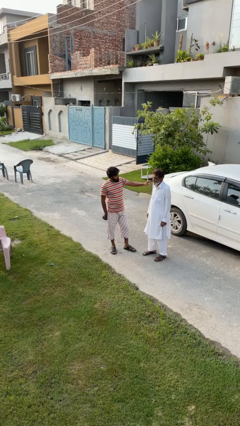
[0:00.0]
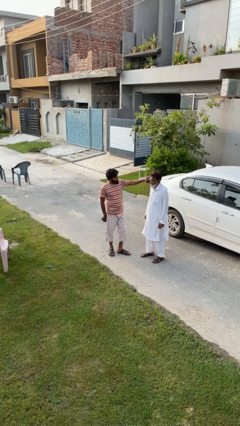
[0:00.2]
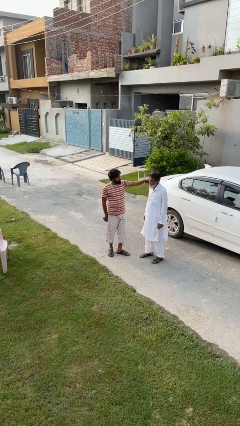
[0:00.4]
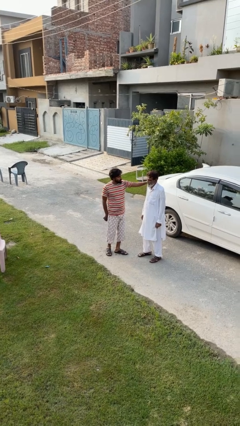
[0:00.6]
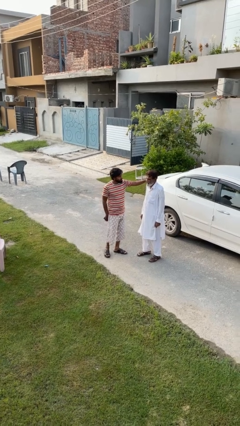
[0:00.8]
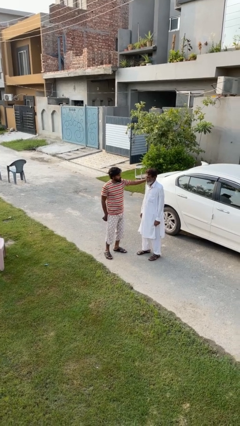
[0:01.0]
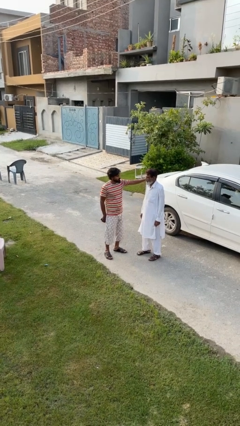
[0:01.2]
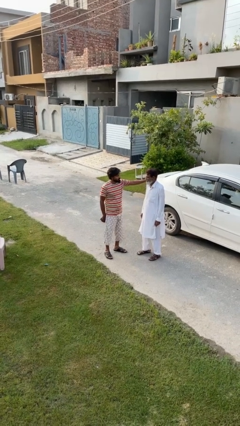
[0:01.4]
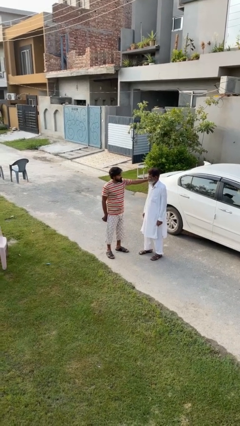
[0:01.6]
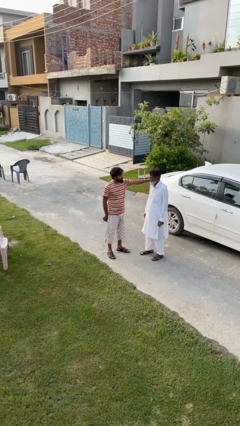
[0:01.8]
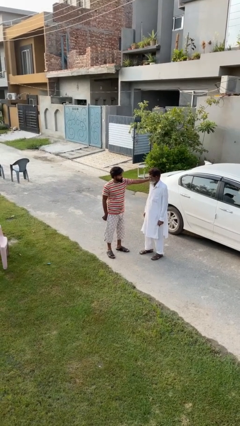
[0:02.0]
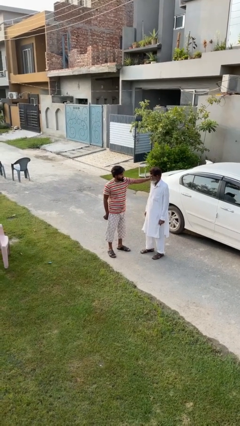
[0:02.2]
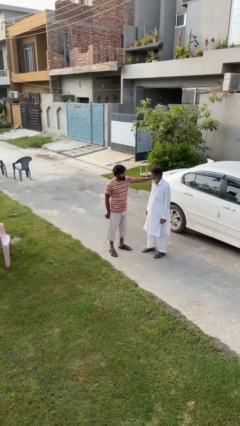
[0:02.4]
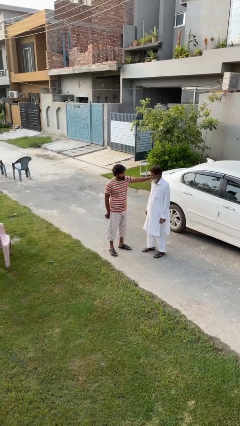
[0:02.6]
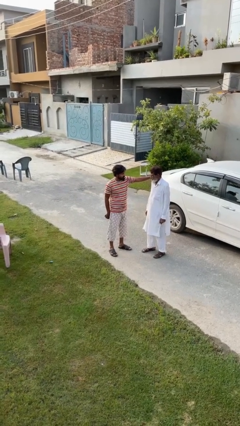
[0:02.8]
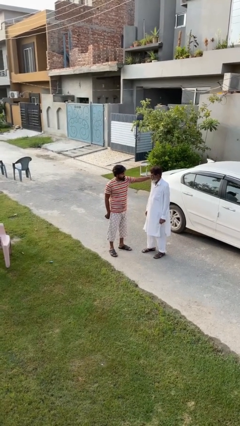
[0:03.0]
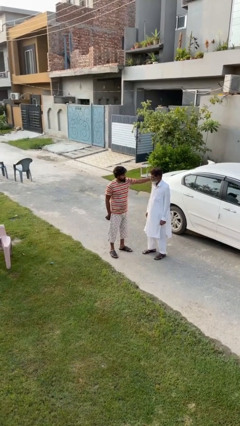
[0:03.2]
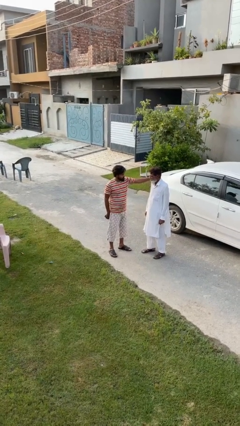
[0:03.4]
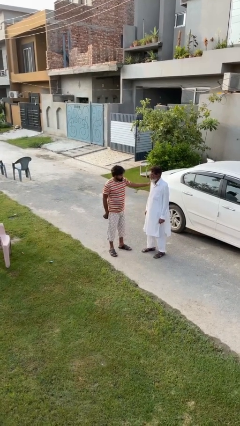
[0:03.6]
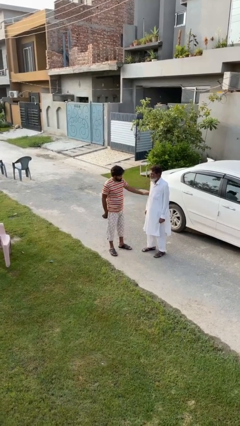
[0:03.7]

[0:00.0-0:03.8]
person pounds shoulders of person

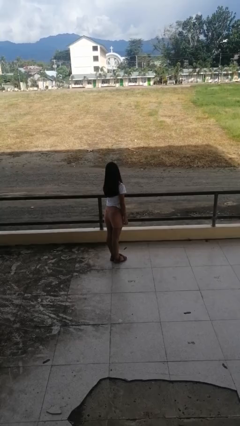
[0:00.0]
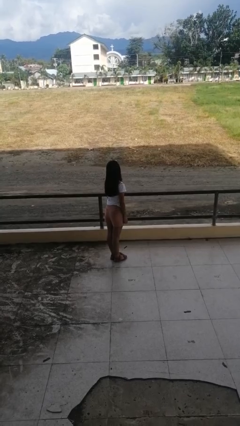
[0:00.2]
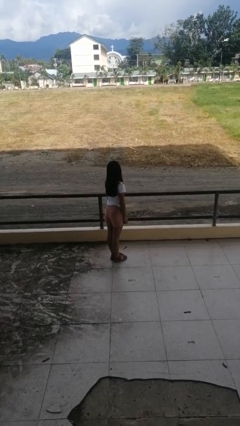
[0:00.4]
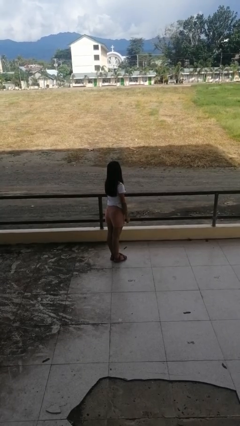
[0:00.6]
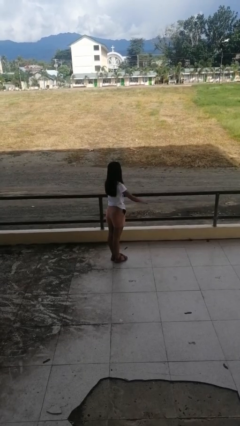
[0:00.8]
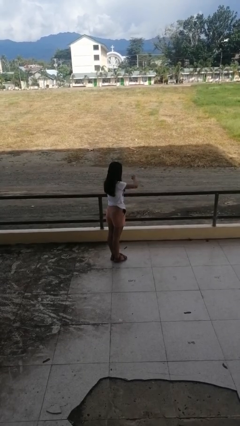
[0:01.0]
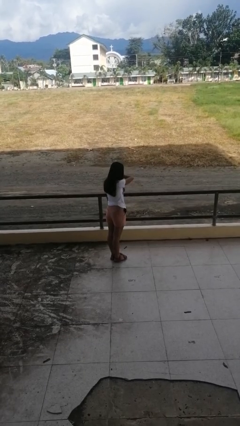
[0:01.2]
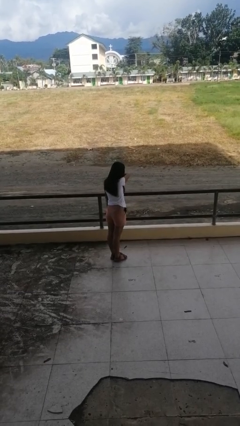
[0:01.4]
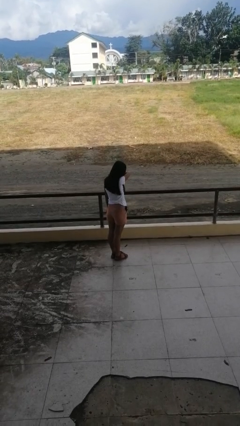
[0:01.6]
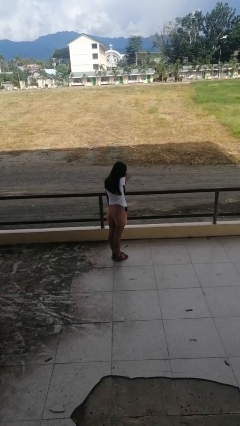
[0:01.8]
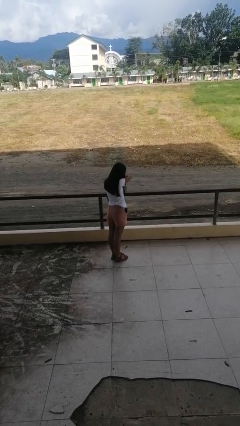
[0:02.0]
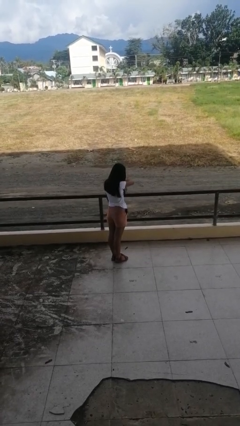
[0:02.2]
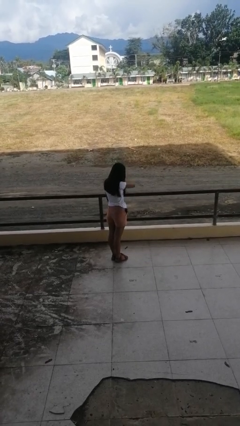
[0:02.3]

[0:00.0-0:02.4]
person sneezes into arm

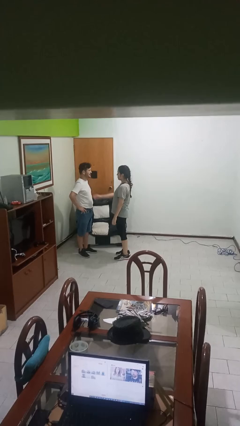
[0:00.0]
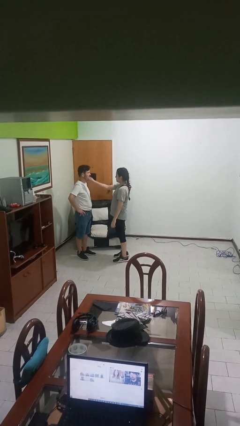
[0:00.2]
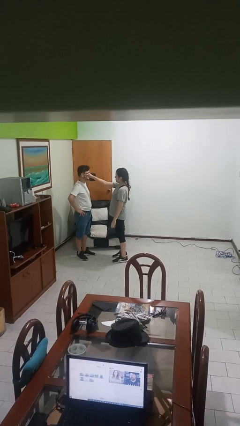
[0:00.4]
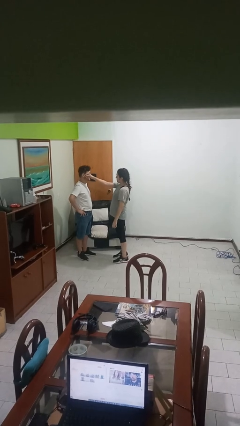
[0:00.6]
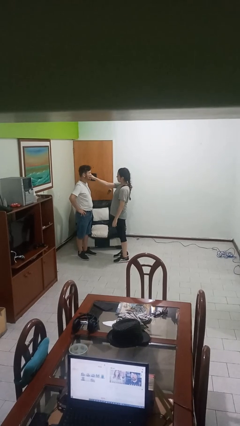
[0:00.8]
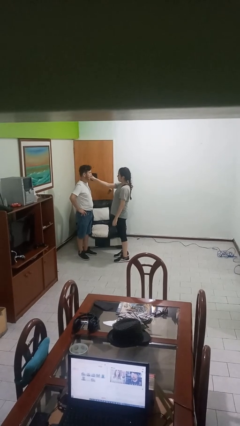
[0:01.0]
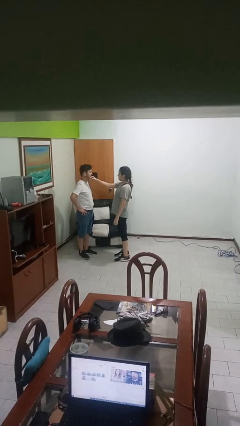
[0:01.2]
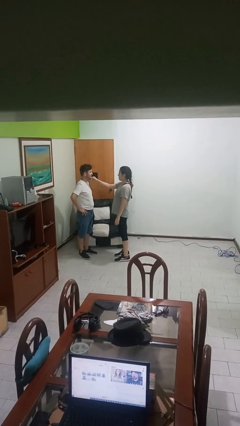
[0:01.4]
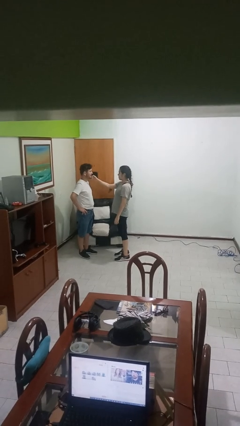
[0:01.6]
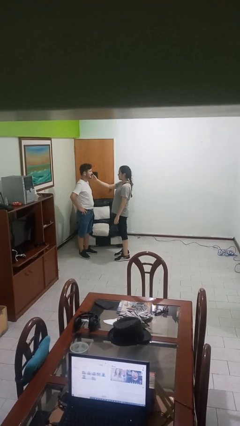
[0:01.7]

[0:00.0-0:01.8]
person touches face of person

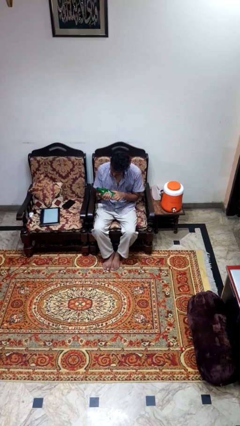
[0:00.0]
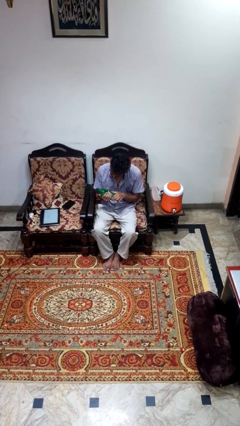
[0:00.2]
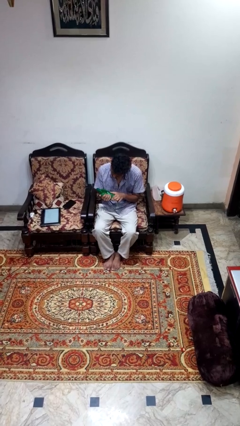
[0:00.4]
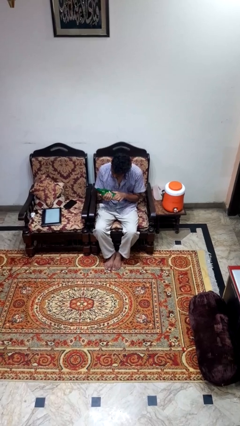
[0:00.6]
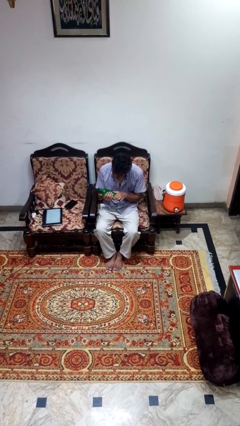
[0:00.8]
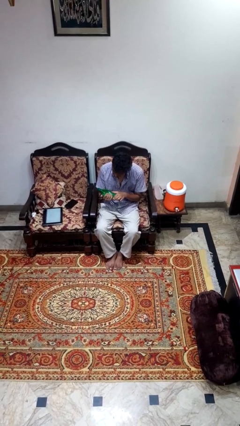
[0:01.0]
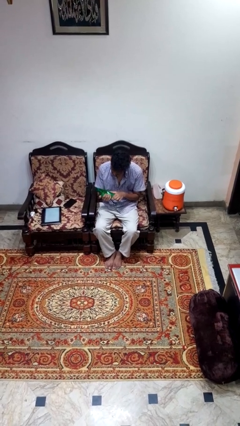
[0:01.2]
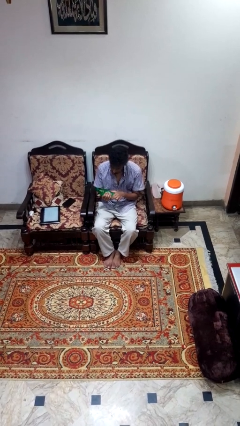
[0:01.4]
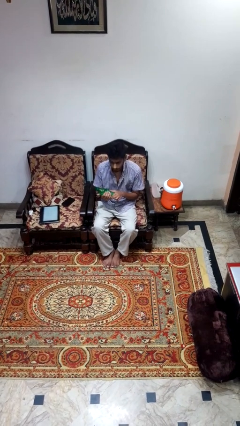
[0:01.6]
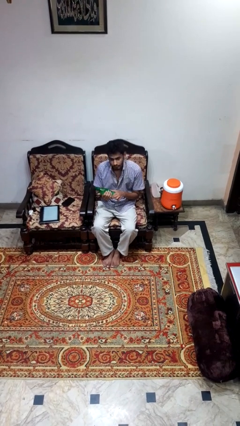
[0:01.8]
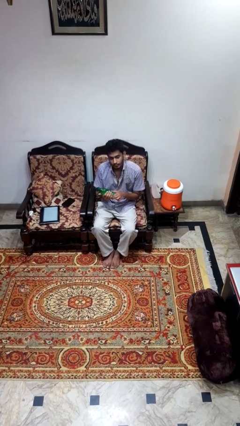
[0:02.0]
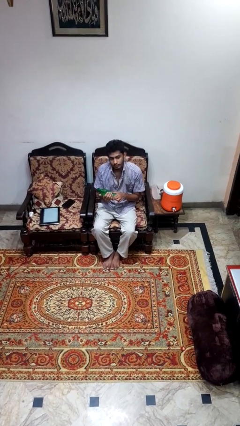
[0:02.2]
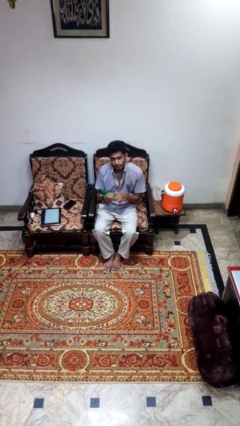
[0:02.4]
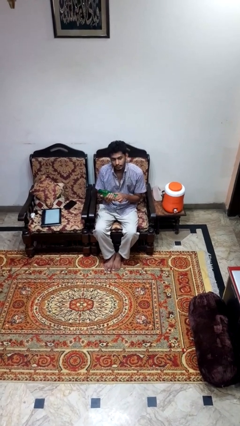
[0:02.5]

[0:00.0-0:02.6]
person squeezes object

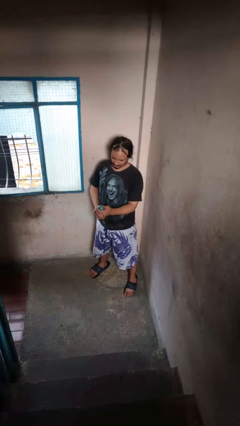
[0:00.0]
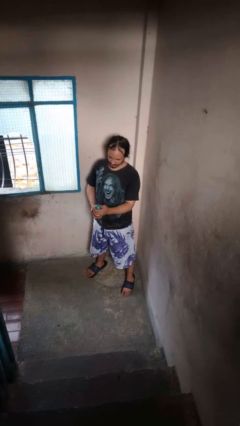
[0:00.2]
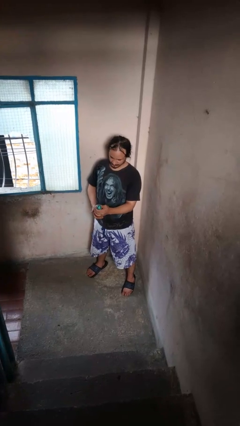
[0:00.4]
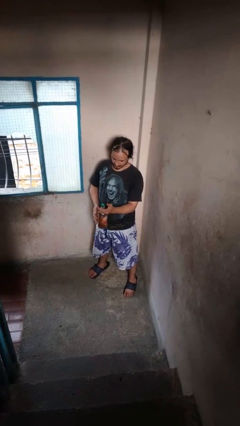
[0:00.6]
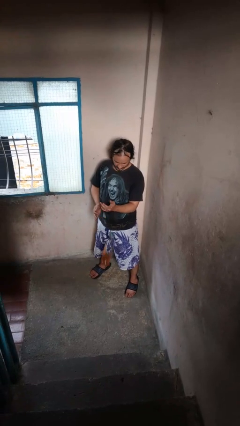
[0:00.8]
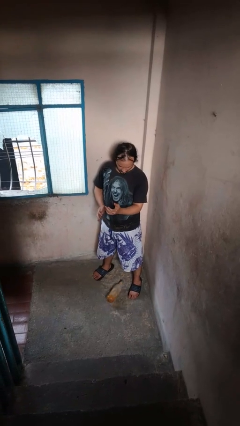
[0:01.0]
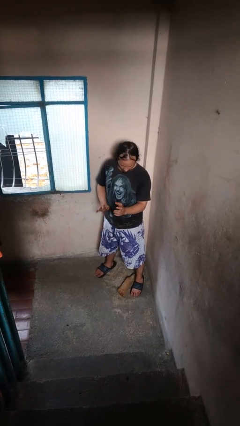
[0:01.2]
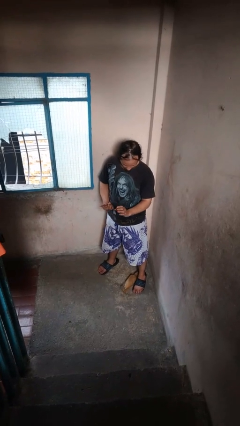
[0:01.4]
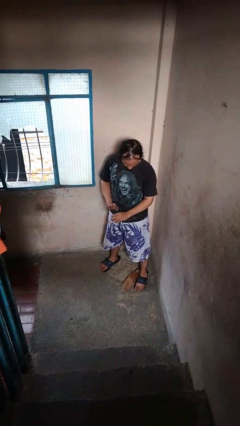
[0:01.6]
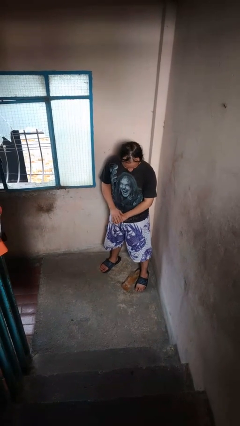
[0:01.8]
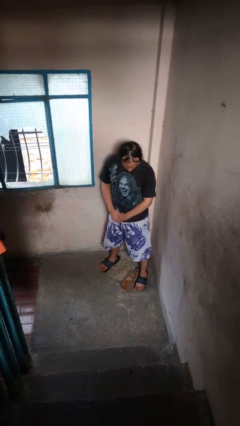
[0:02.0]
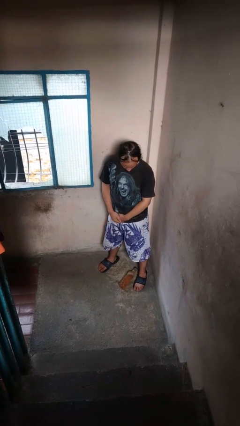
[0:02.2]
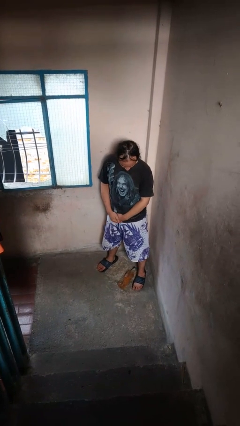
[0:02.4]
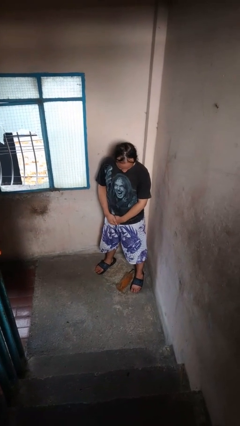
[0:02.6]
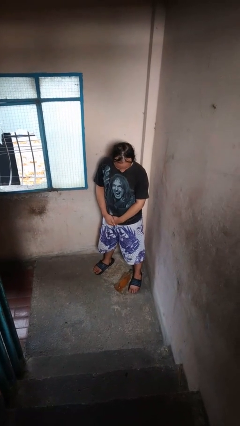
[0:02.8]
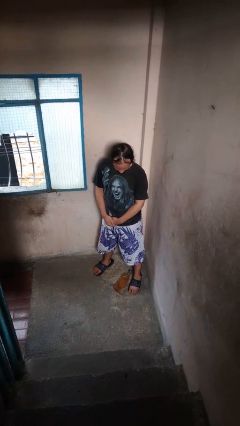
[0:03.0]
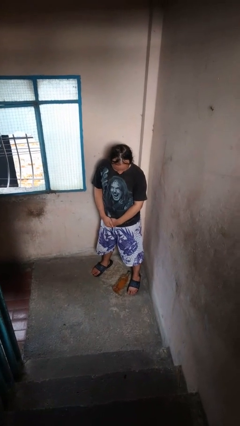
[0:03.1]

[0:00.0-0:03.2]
person drops object

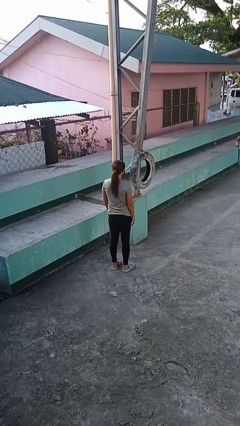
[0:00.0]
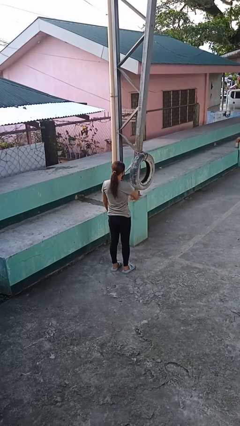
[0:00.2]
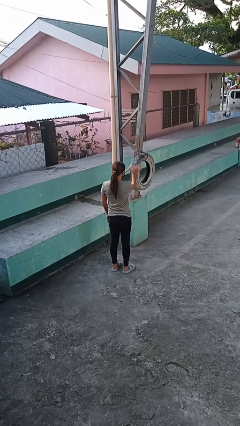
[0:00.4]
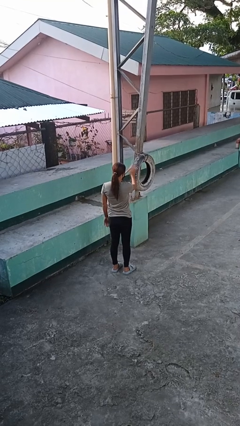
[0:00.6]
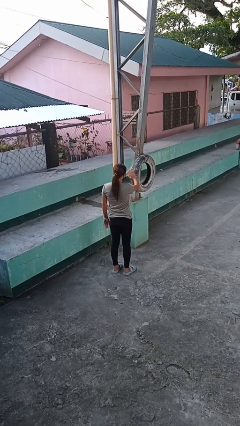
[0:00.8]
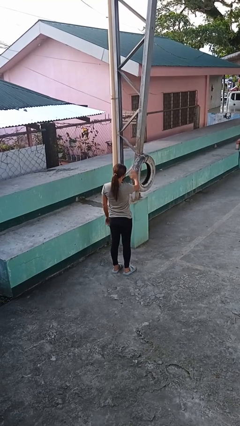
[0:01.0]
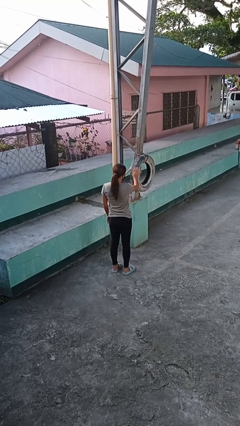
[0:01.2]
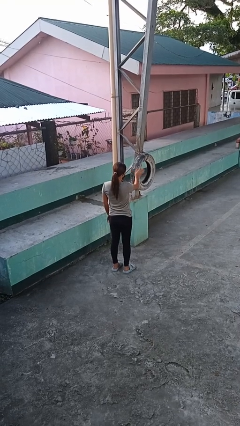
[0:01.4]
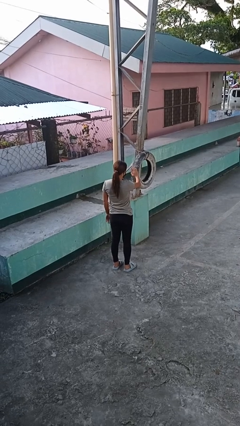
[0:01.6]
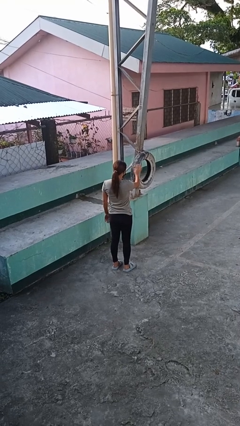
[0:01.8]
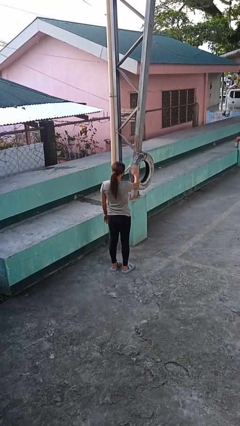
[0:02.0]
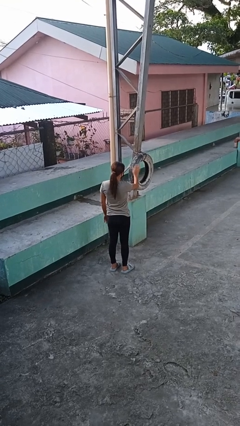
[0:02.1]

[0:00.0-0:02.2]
person waves hand over object

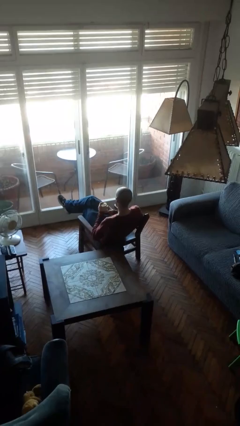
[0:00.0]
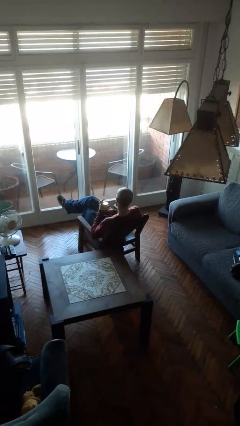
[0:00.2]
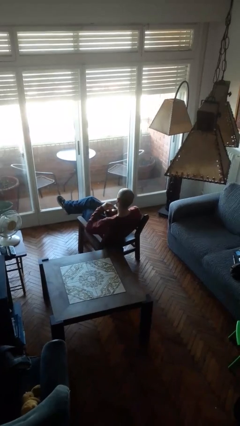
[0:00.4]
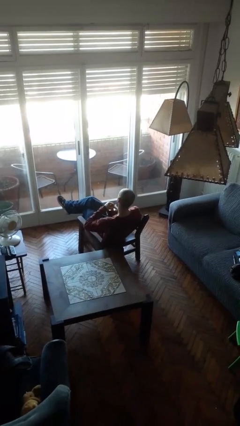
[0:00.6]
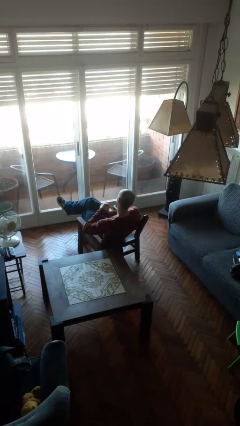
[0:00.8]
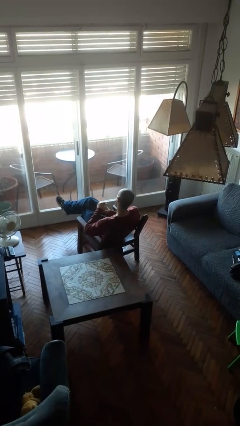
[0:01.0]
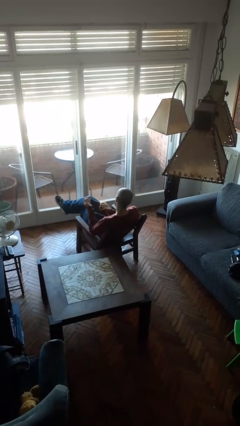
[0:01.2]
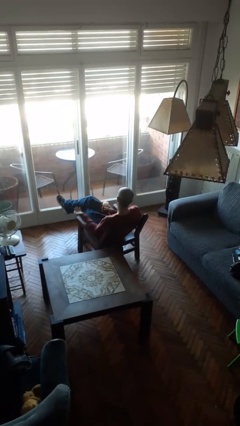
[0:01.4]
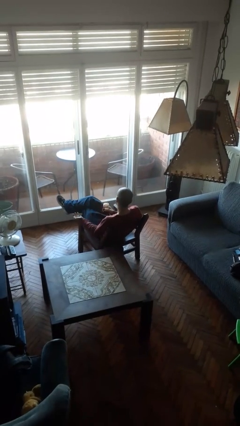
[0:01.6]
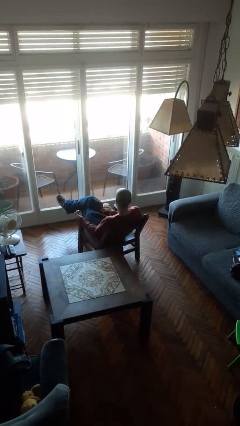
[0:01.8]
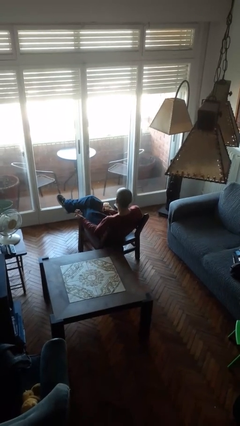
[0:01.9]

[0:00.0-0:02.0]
person opens jar
